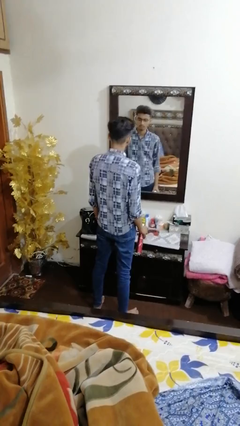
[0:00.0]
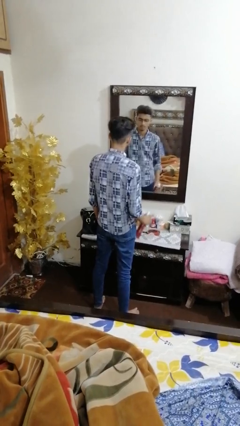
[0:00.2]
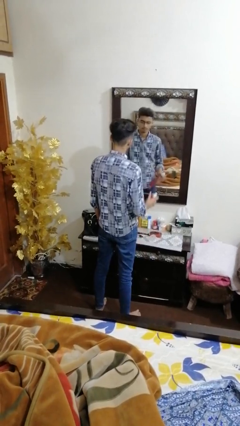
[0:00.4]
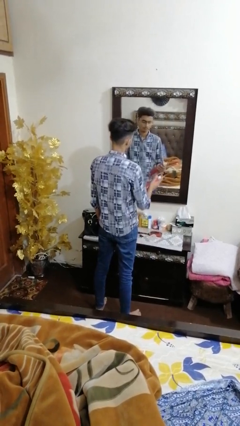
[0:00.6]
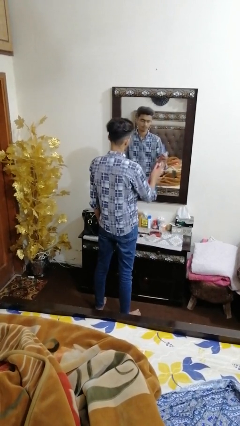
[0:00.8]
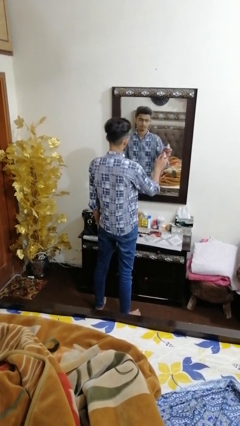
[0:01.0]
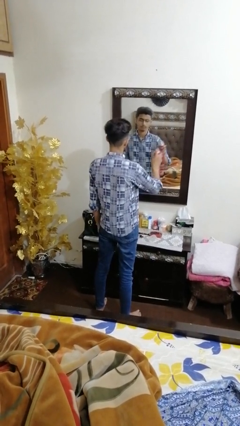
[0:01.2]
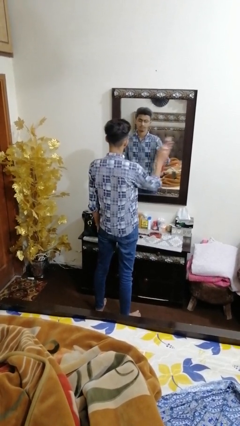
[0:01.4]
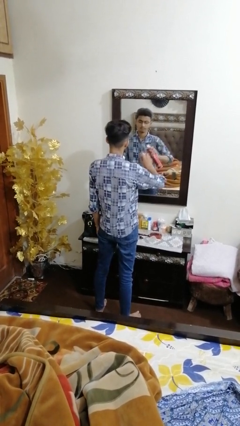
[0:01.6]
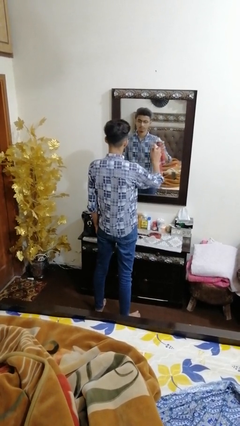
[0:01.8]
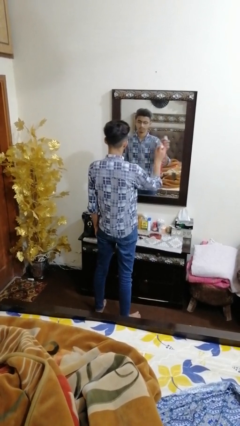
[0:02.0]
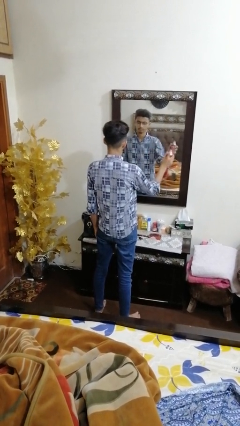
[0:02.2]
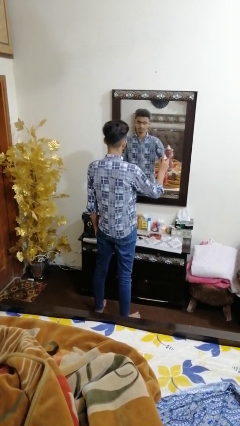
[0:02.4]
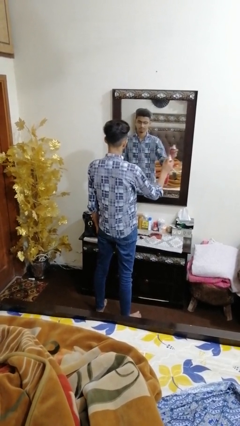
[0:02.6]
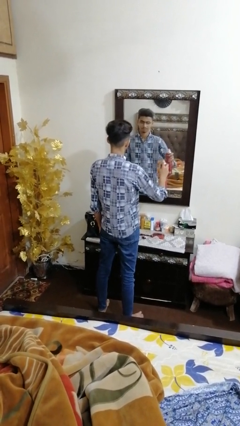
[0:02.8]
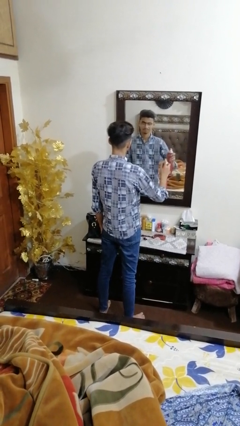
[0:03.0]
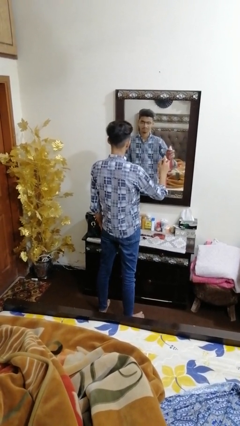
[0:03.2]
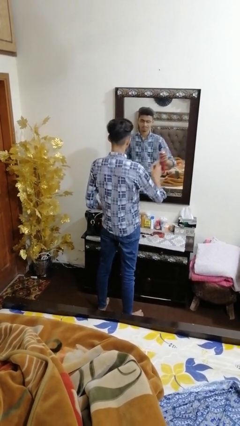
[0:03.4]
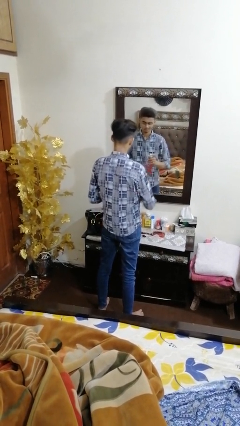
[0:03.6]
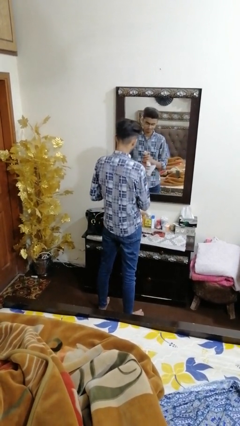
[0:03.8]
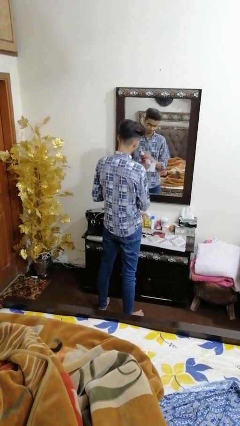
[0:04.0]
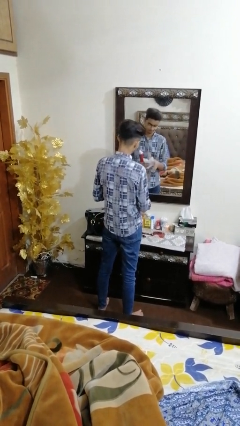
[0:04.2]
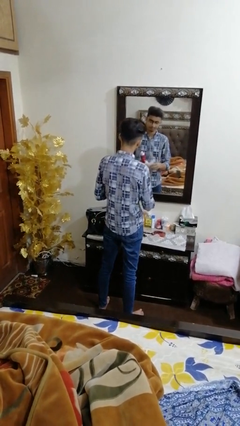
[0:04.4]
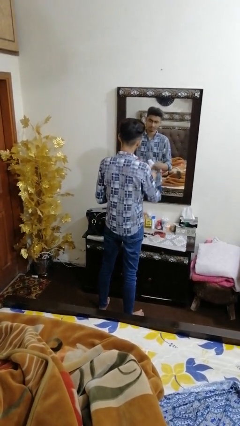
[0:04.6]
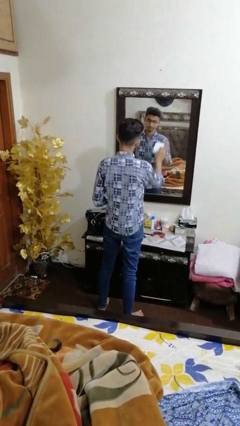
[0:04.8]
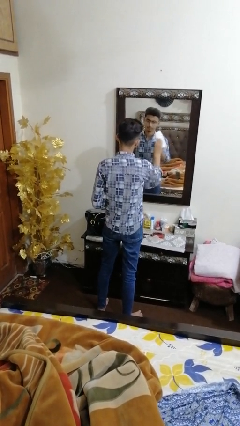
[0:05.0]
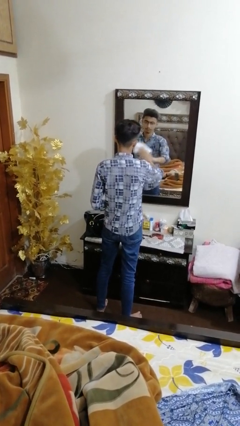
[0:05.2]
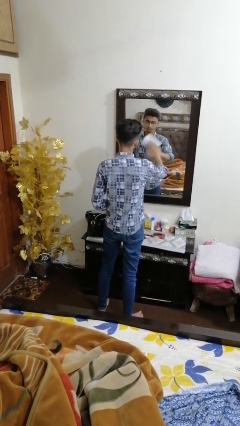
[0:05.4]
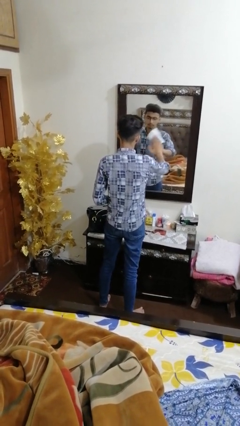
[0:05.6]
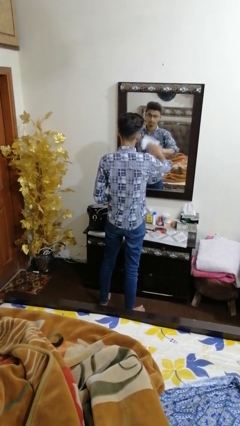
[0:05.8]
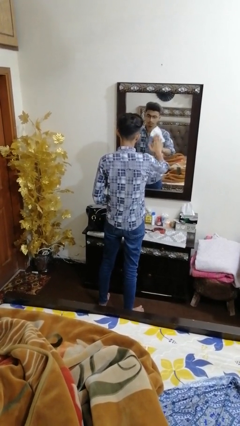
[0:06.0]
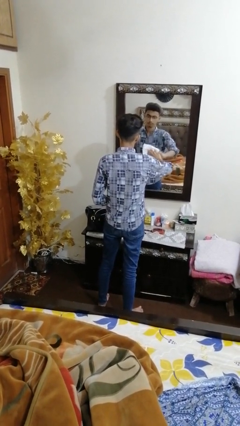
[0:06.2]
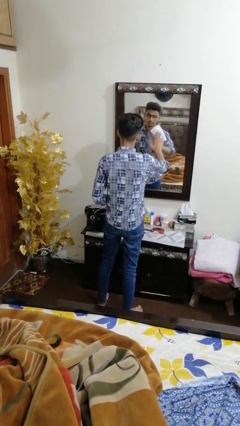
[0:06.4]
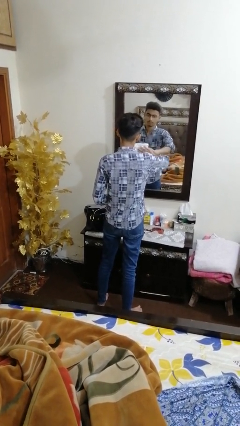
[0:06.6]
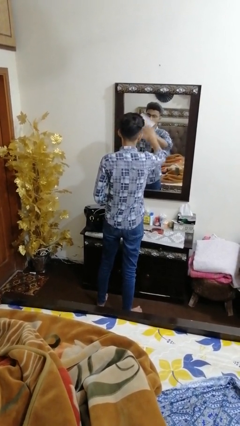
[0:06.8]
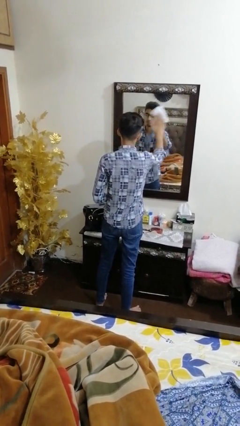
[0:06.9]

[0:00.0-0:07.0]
person sprays from bottle

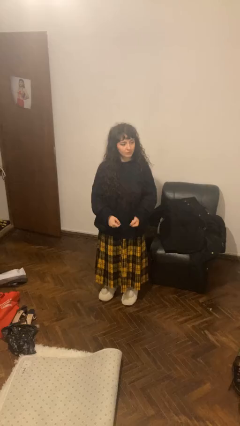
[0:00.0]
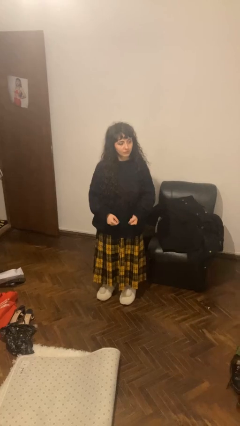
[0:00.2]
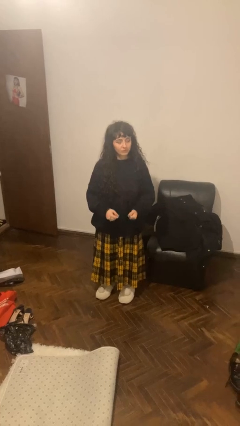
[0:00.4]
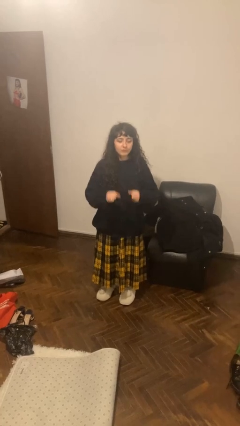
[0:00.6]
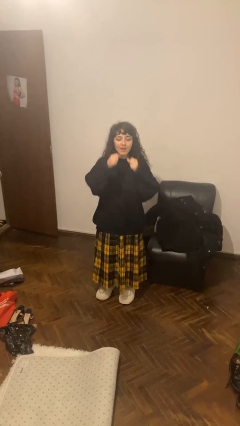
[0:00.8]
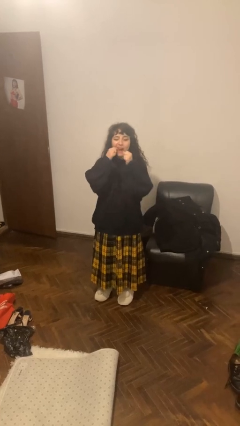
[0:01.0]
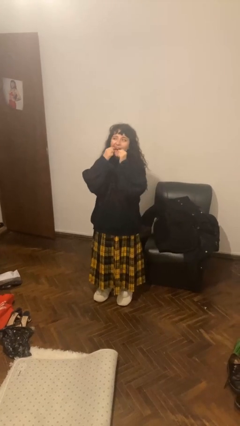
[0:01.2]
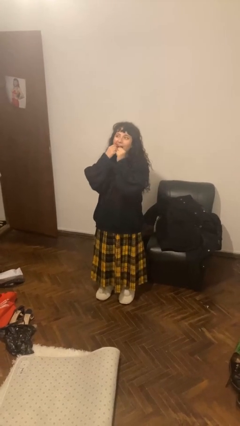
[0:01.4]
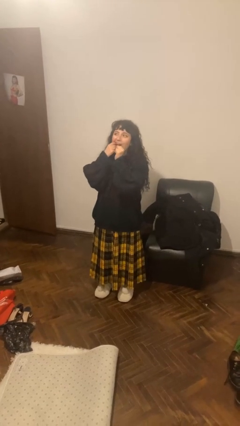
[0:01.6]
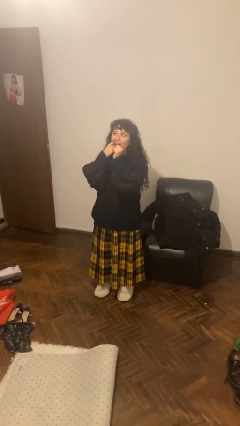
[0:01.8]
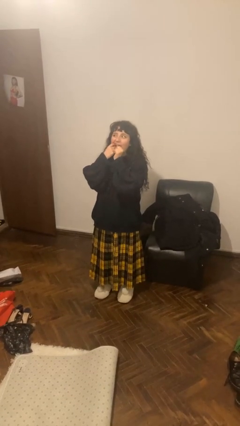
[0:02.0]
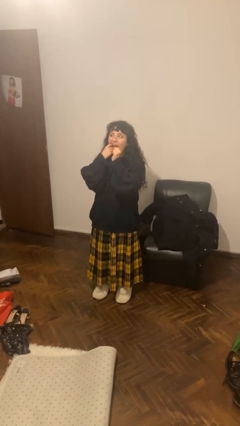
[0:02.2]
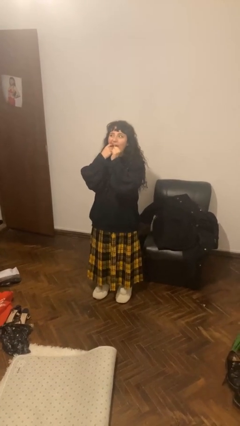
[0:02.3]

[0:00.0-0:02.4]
person flosses

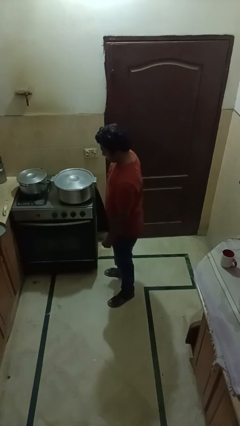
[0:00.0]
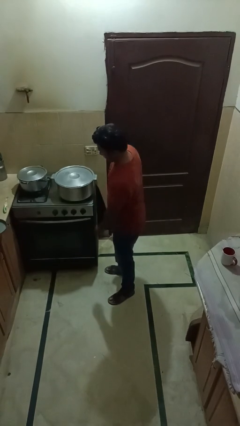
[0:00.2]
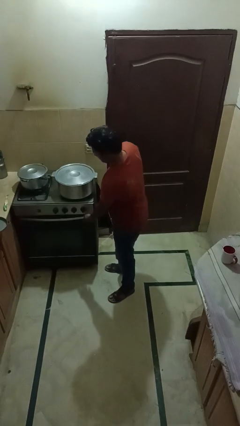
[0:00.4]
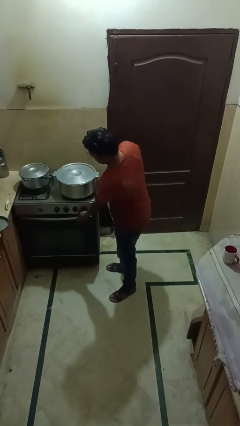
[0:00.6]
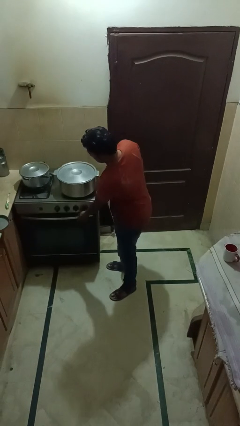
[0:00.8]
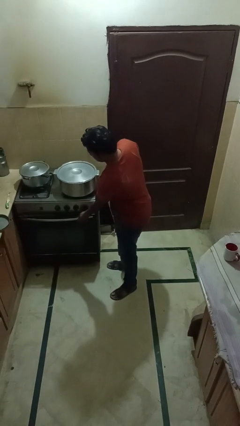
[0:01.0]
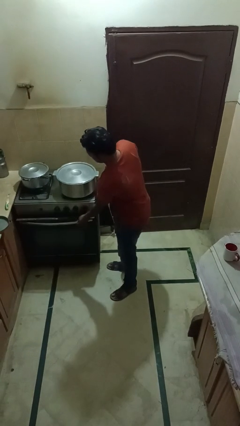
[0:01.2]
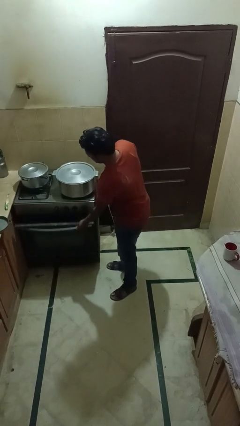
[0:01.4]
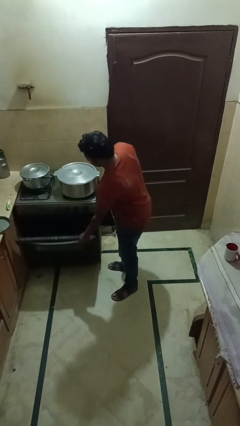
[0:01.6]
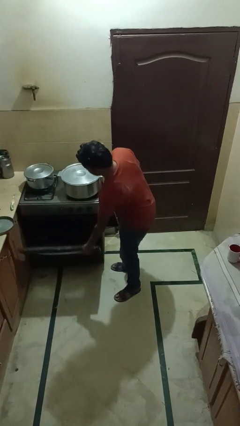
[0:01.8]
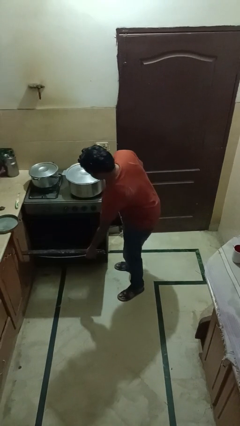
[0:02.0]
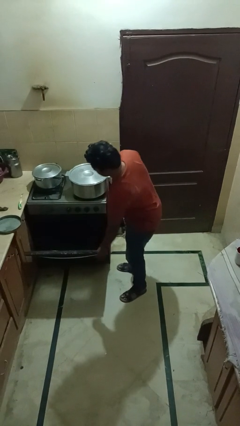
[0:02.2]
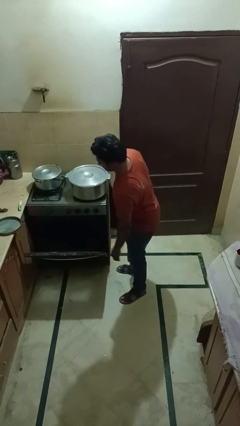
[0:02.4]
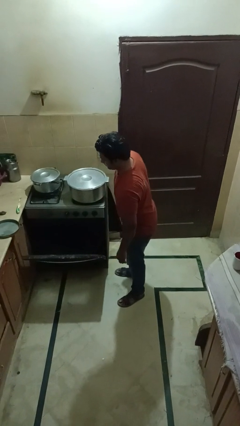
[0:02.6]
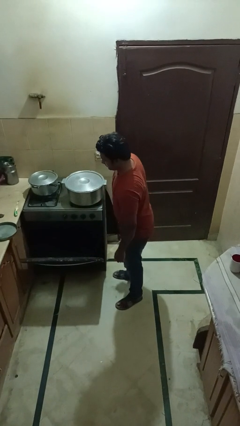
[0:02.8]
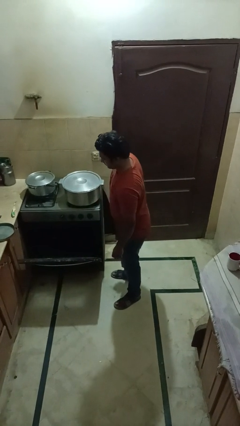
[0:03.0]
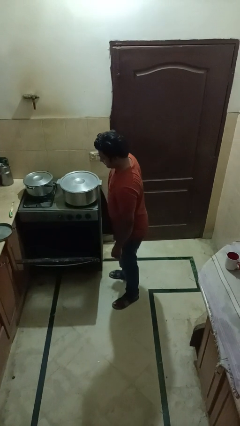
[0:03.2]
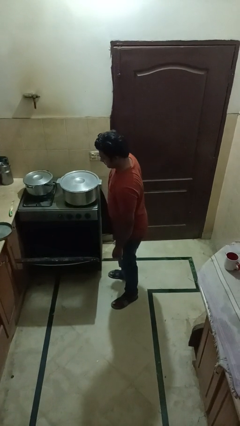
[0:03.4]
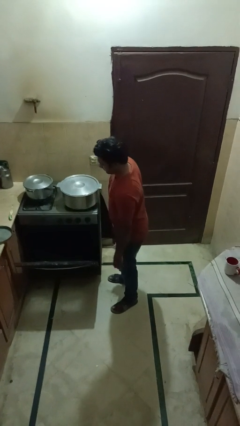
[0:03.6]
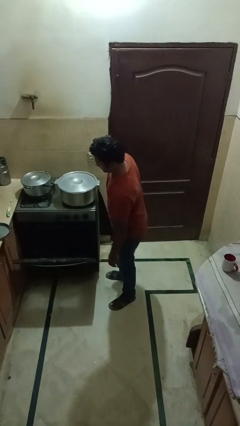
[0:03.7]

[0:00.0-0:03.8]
person opens oven door

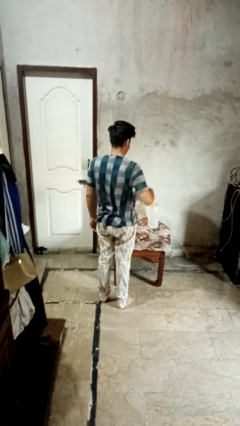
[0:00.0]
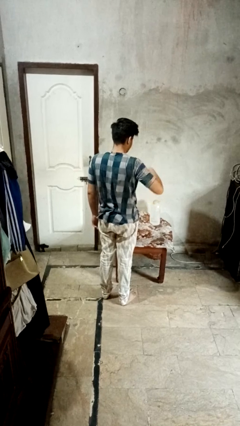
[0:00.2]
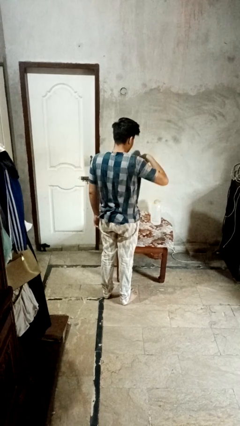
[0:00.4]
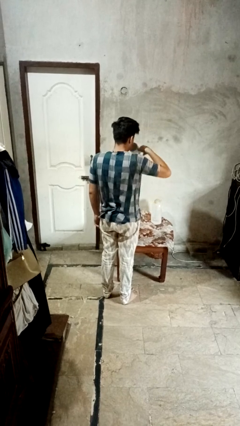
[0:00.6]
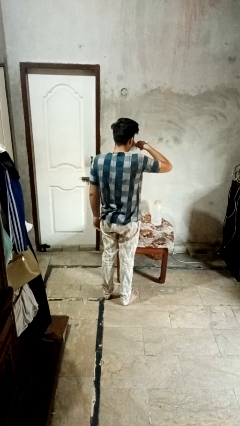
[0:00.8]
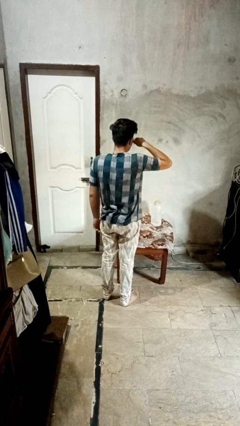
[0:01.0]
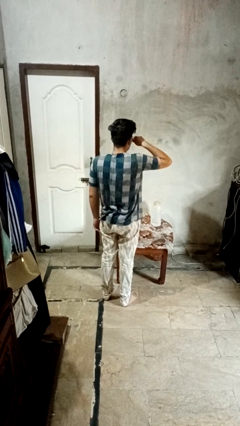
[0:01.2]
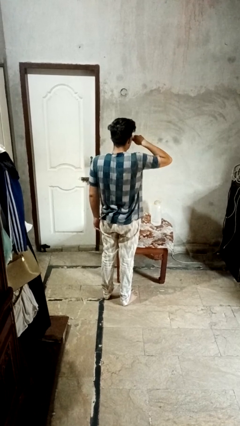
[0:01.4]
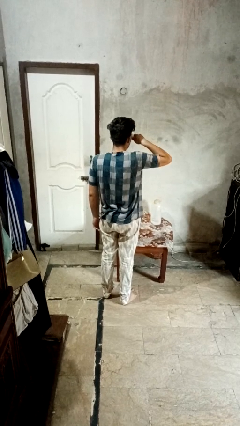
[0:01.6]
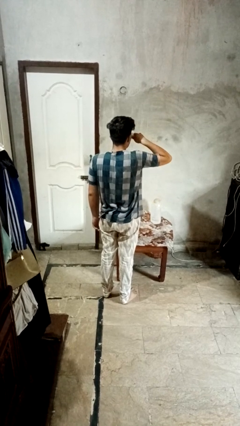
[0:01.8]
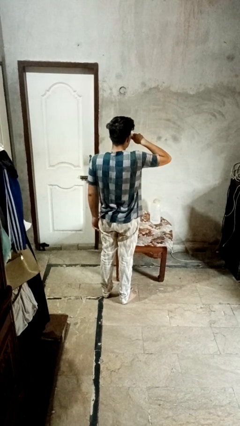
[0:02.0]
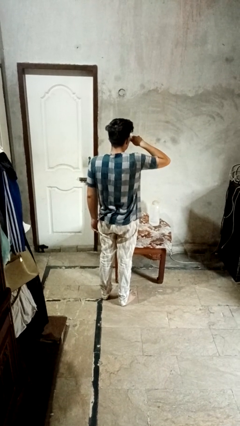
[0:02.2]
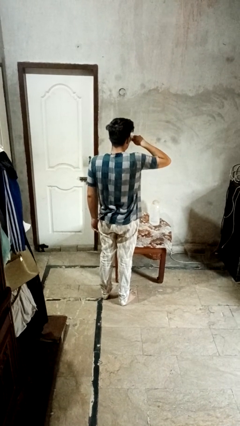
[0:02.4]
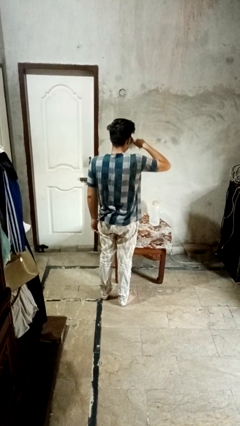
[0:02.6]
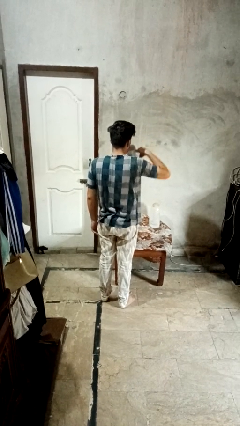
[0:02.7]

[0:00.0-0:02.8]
person drinks from mug

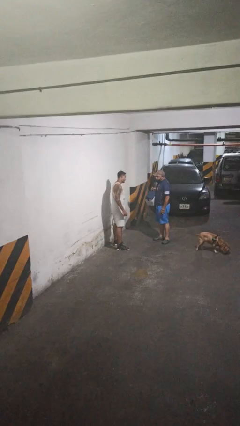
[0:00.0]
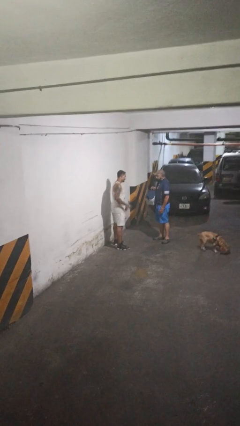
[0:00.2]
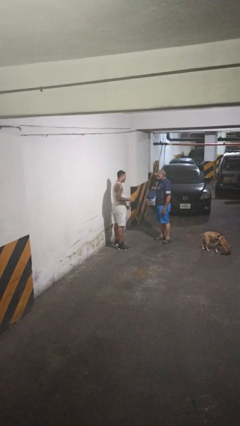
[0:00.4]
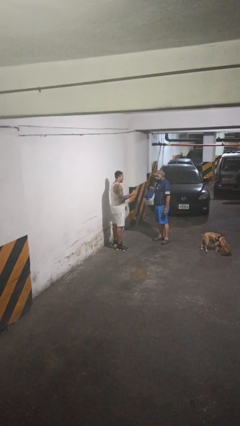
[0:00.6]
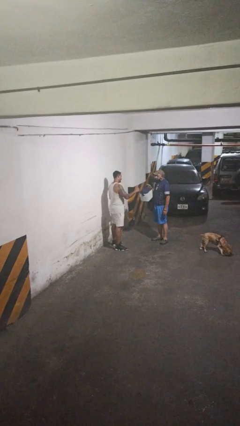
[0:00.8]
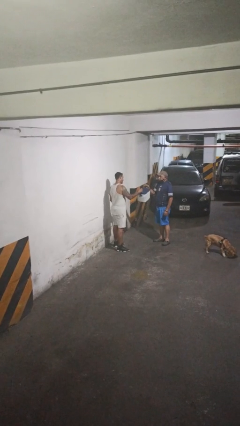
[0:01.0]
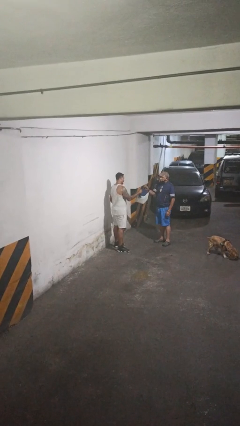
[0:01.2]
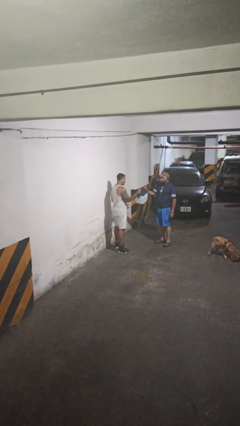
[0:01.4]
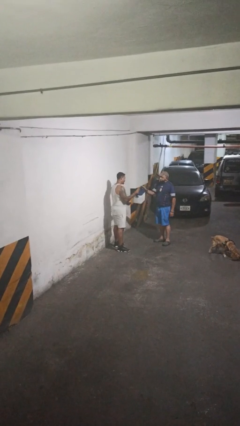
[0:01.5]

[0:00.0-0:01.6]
person transfers object to person
